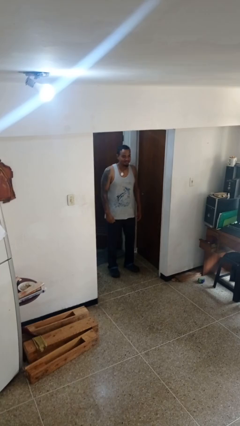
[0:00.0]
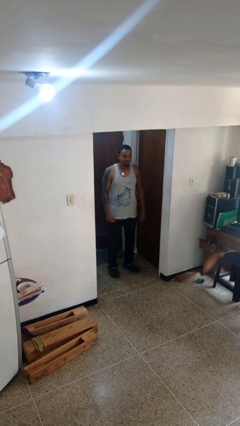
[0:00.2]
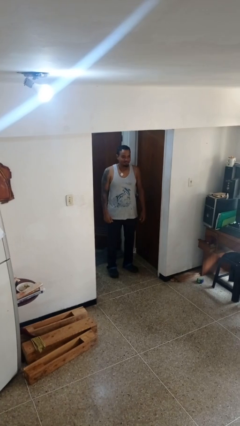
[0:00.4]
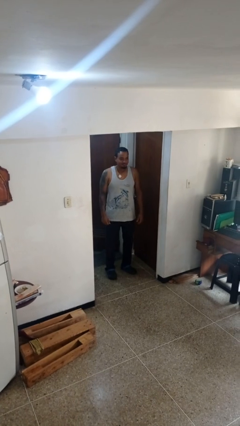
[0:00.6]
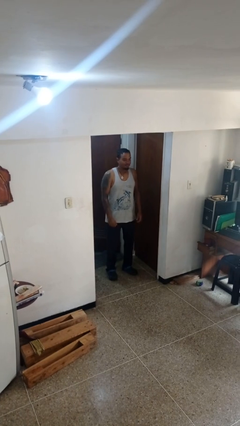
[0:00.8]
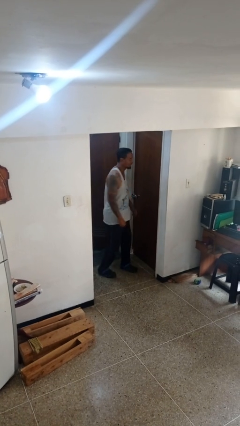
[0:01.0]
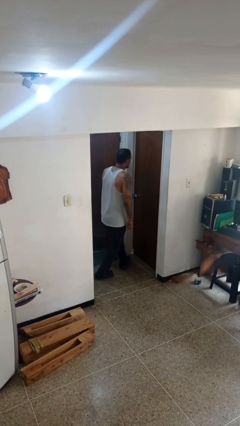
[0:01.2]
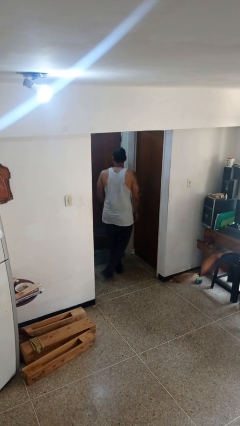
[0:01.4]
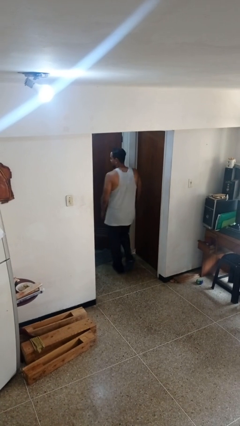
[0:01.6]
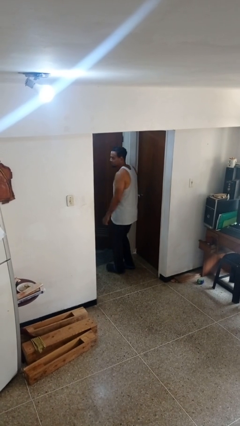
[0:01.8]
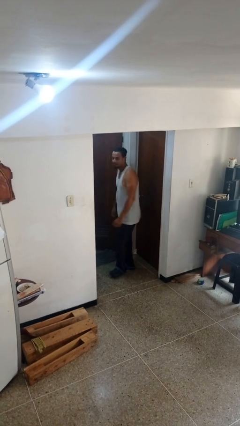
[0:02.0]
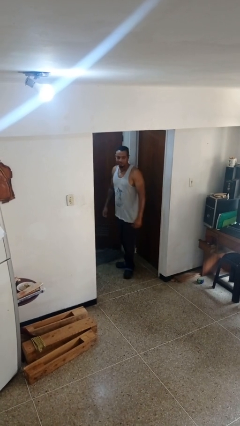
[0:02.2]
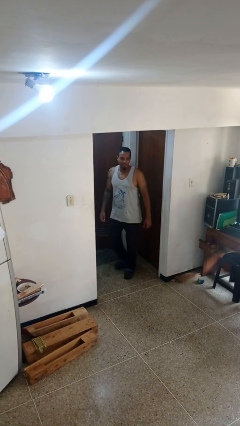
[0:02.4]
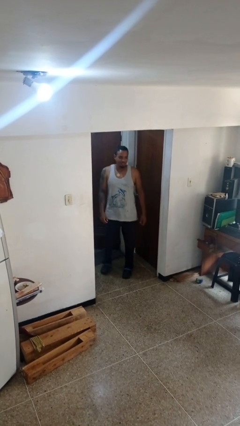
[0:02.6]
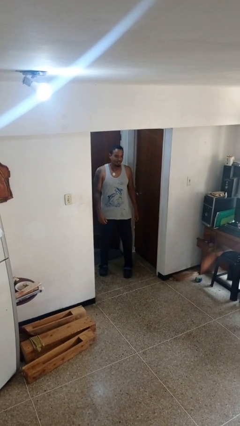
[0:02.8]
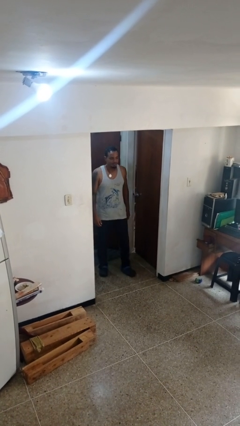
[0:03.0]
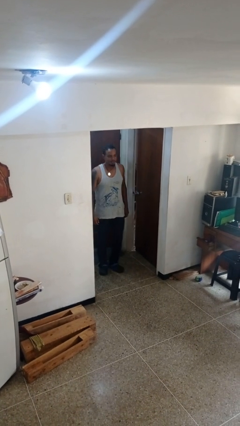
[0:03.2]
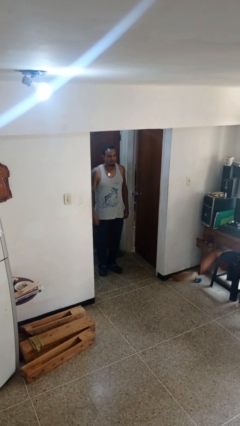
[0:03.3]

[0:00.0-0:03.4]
person twirls

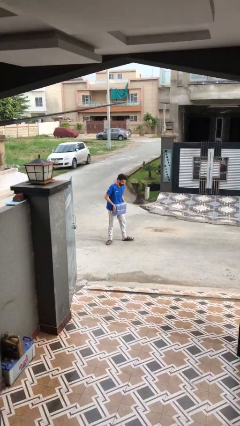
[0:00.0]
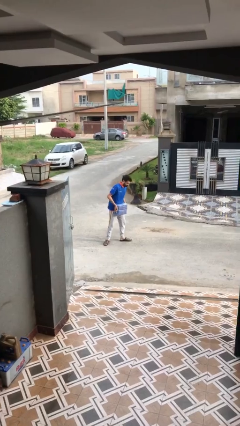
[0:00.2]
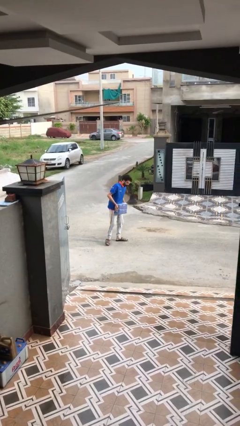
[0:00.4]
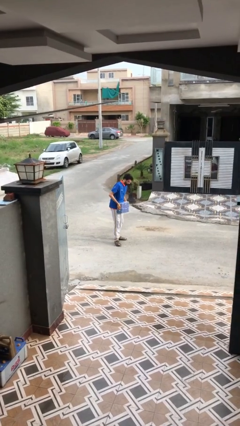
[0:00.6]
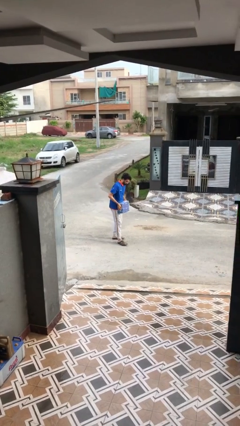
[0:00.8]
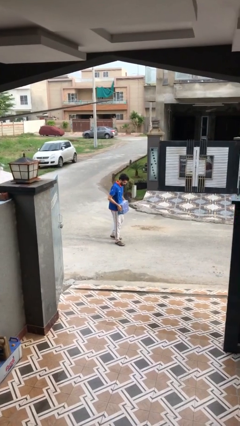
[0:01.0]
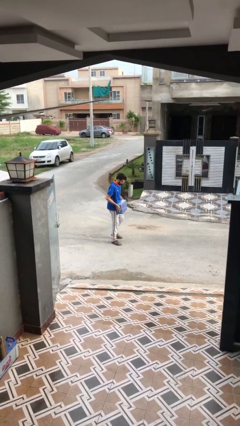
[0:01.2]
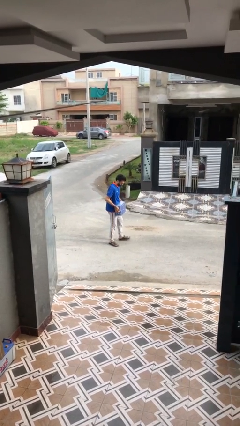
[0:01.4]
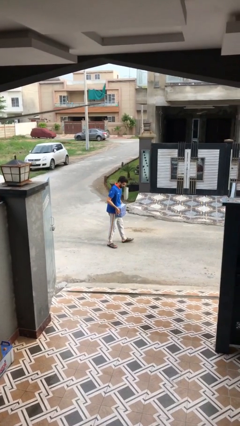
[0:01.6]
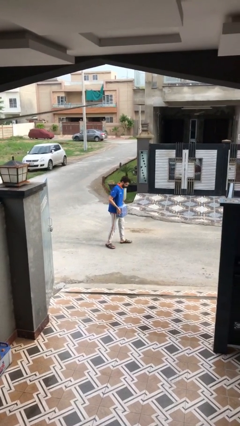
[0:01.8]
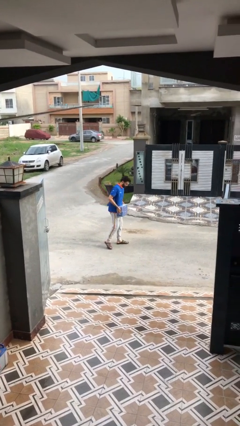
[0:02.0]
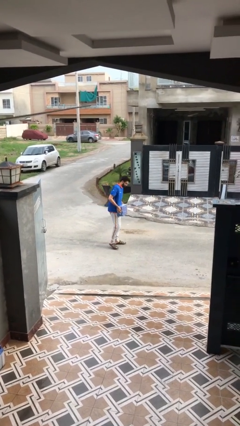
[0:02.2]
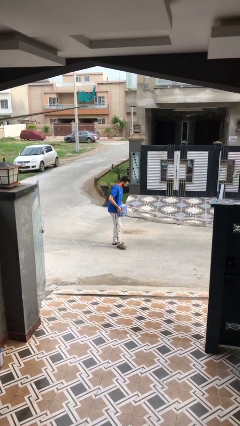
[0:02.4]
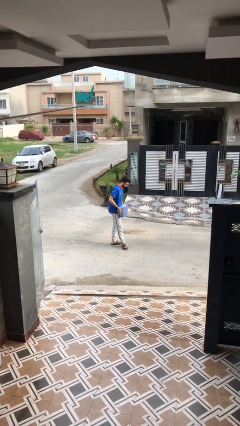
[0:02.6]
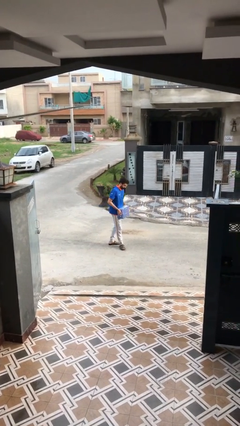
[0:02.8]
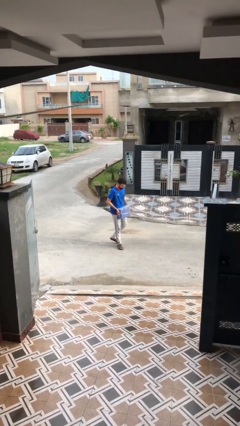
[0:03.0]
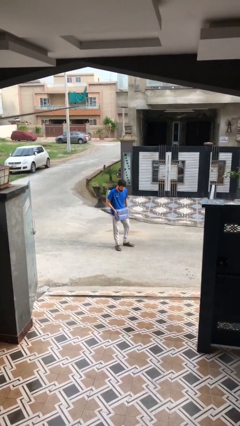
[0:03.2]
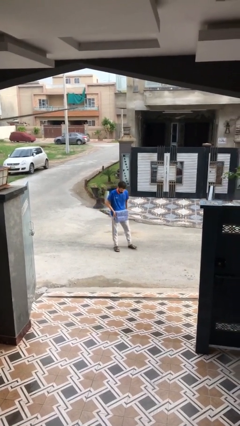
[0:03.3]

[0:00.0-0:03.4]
person carries heavy object

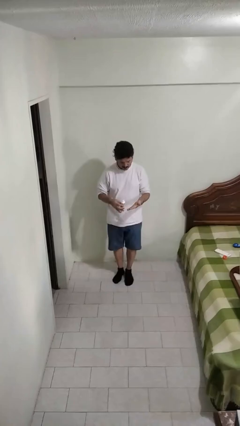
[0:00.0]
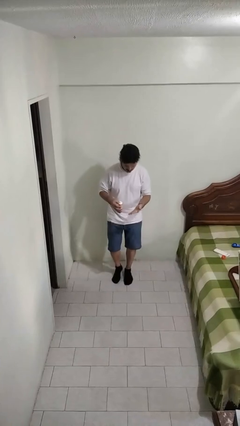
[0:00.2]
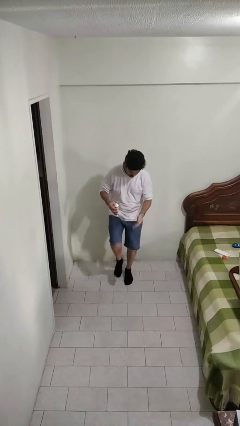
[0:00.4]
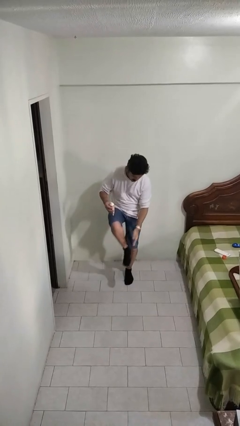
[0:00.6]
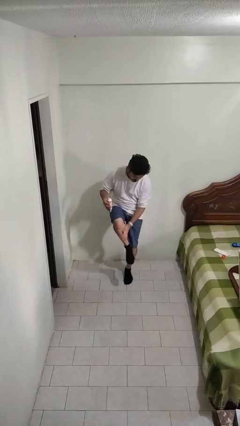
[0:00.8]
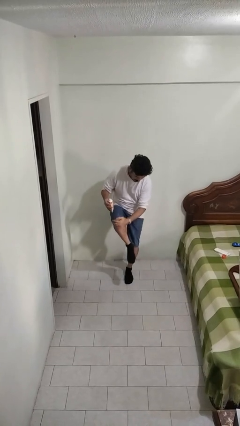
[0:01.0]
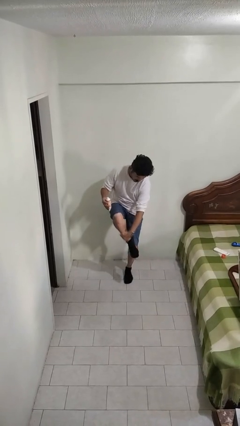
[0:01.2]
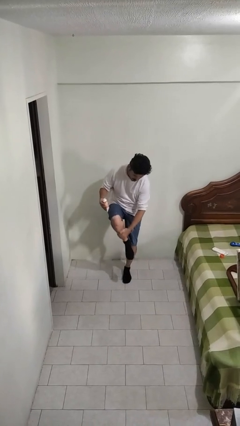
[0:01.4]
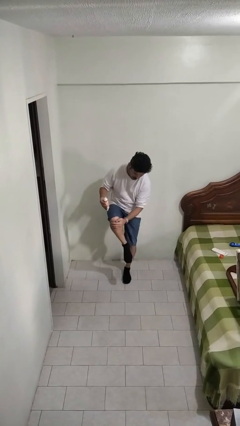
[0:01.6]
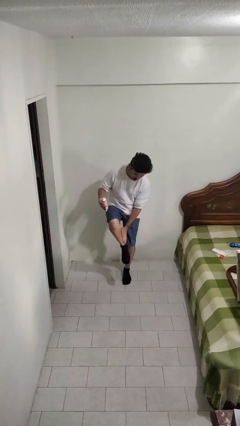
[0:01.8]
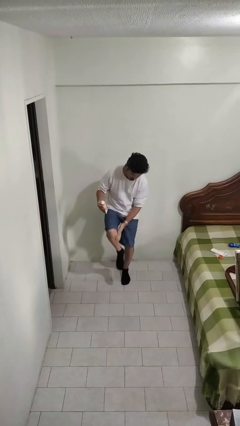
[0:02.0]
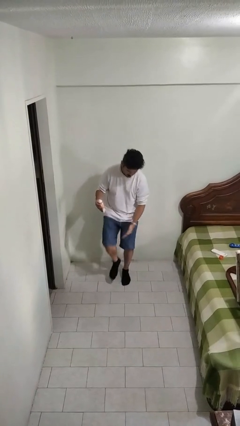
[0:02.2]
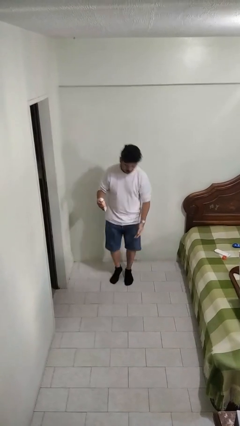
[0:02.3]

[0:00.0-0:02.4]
person applies sunscreen

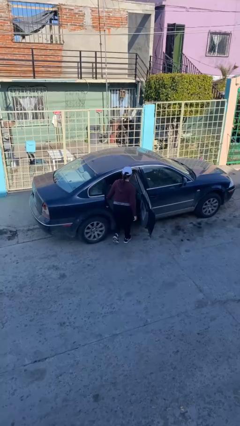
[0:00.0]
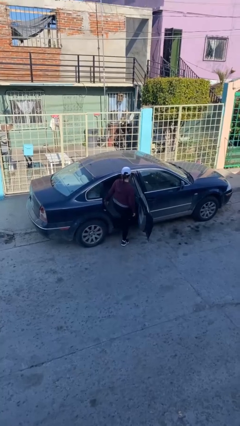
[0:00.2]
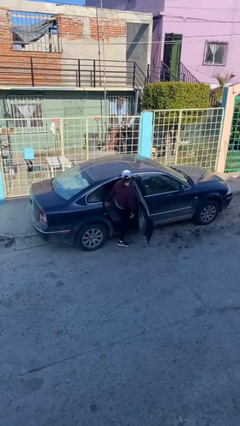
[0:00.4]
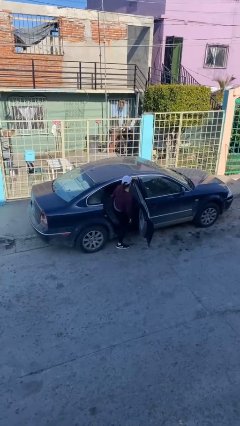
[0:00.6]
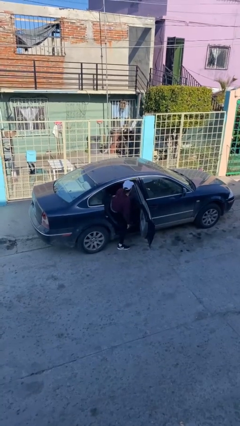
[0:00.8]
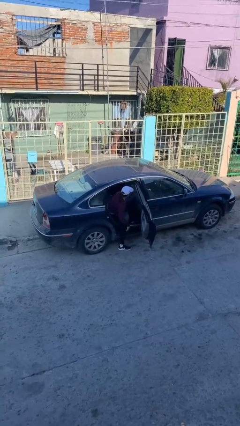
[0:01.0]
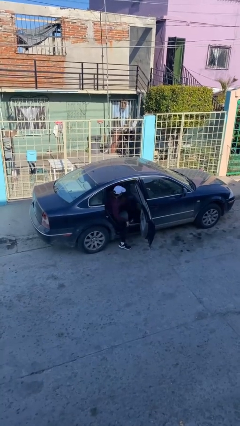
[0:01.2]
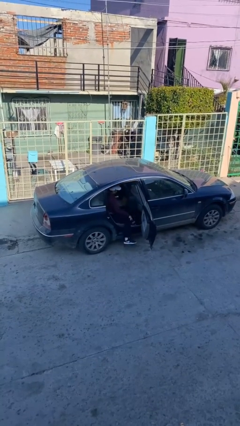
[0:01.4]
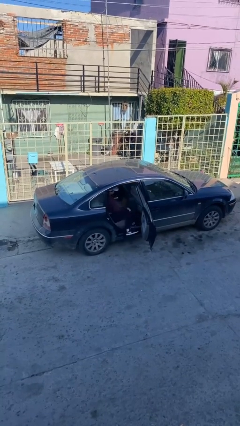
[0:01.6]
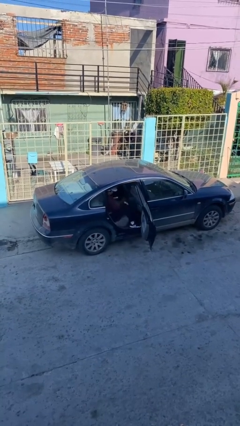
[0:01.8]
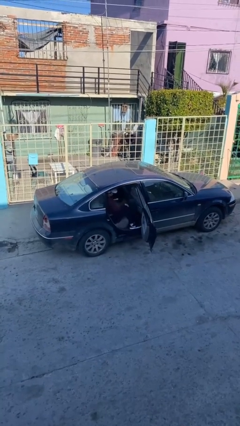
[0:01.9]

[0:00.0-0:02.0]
person enters car

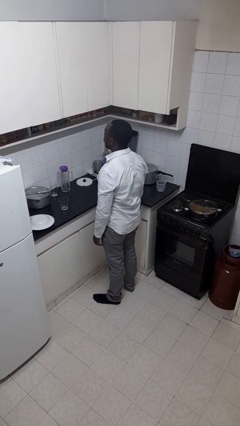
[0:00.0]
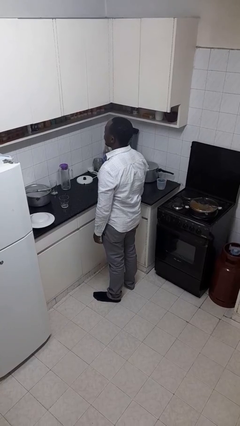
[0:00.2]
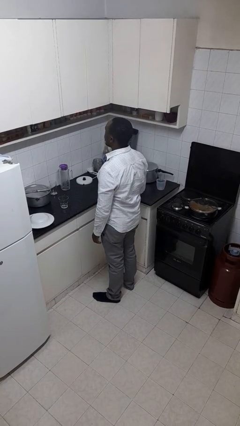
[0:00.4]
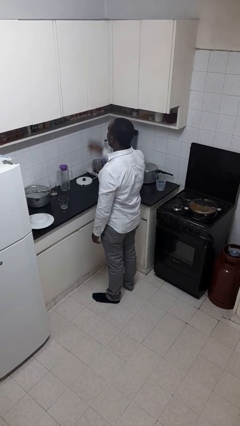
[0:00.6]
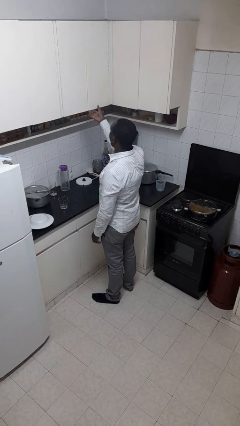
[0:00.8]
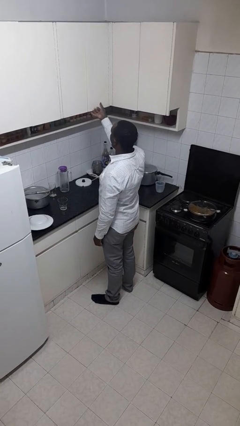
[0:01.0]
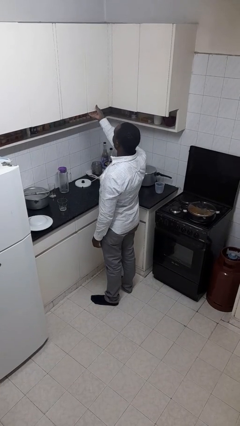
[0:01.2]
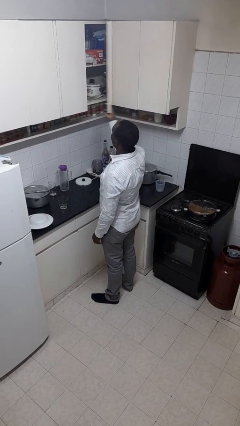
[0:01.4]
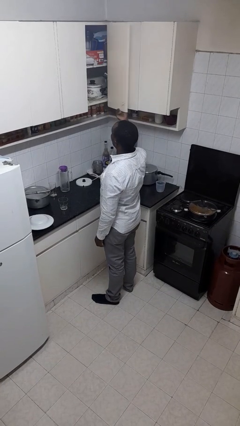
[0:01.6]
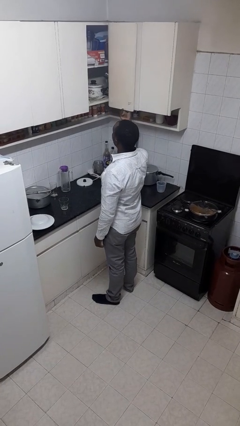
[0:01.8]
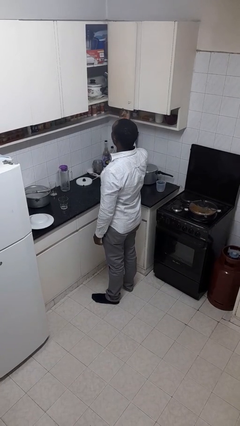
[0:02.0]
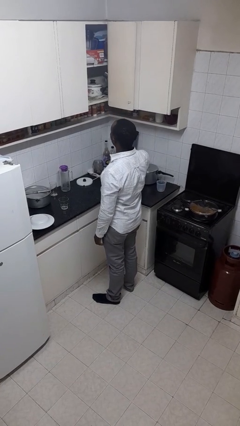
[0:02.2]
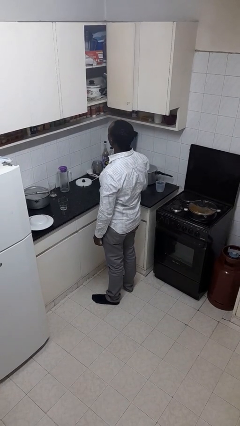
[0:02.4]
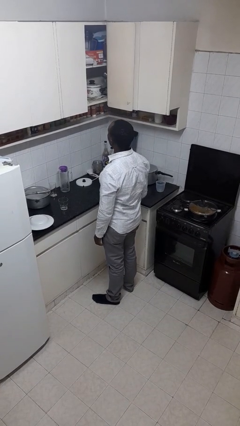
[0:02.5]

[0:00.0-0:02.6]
person opens cabinet

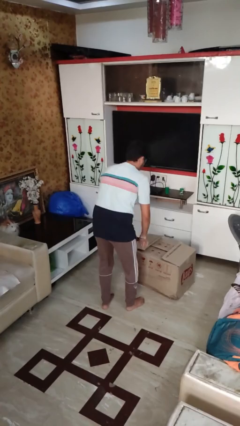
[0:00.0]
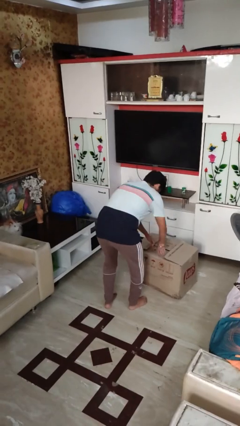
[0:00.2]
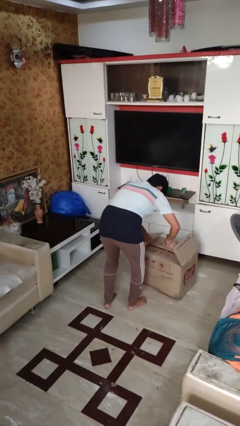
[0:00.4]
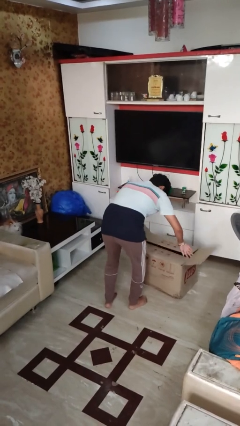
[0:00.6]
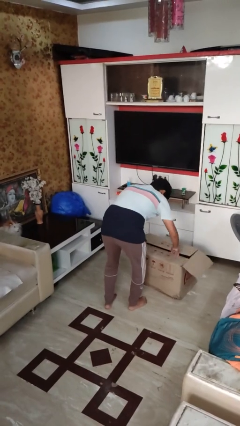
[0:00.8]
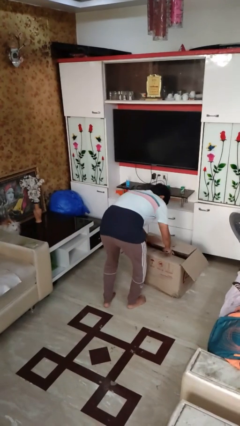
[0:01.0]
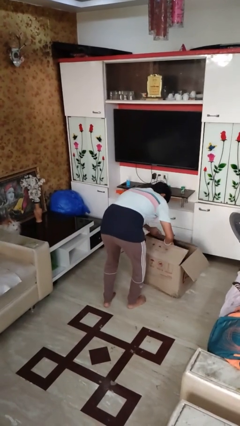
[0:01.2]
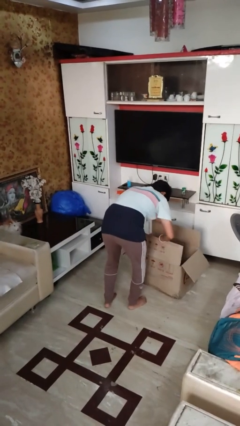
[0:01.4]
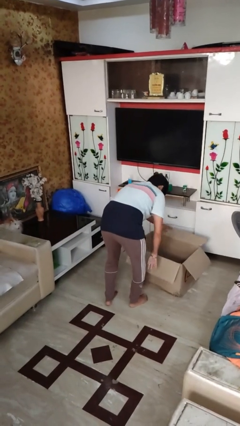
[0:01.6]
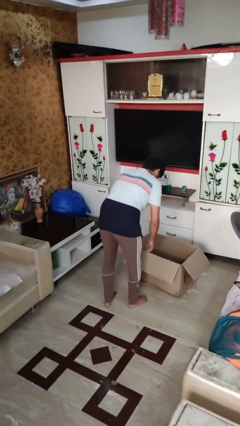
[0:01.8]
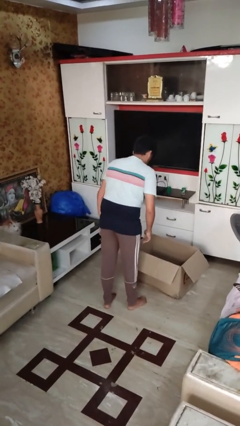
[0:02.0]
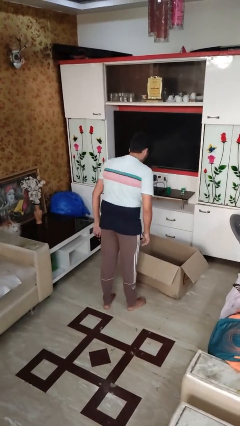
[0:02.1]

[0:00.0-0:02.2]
person opens box

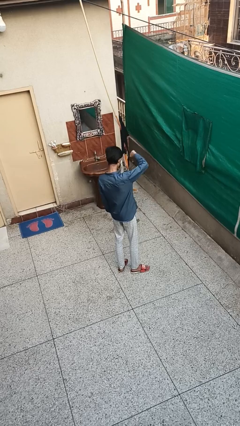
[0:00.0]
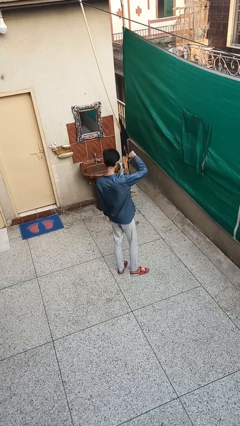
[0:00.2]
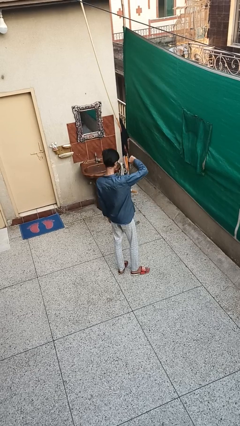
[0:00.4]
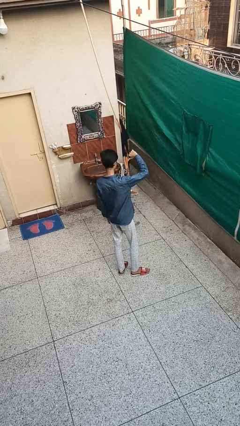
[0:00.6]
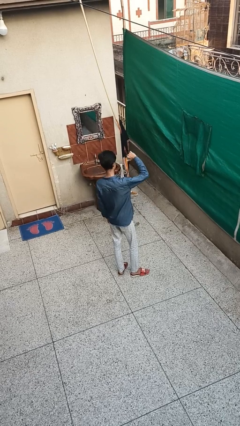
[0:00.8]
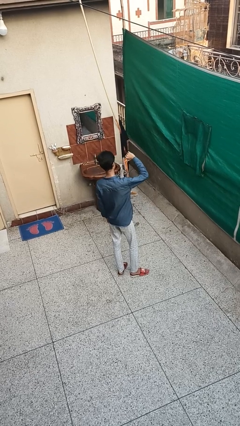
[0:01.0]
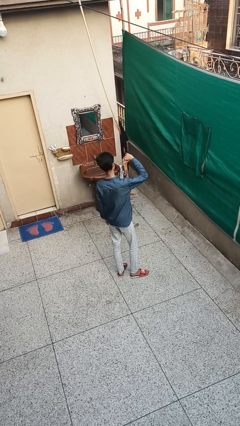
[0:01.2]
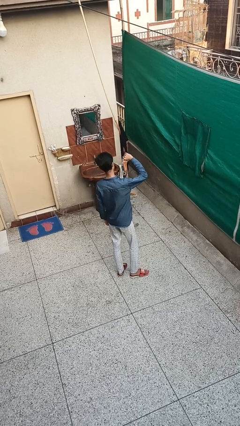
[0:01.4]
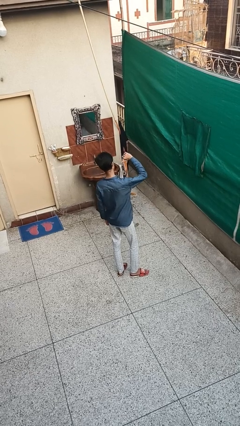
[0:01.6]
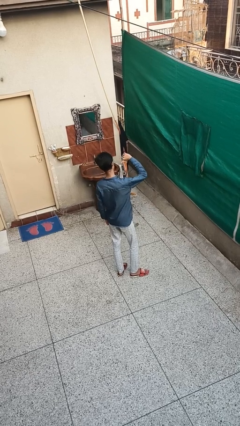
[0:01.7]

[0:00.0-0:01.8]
person gestures thumbs down
